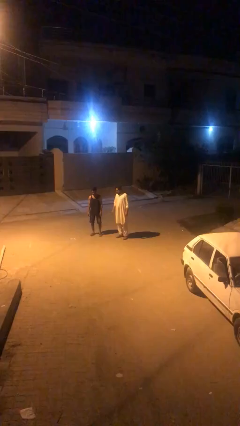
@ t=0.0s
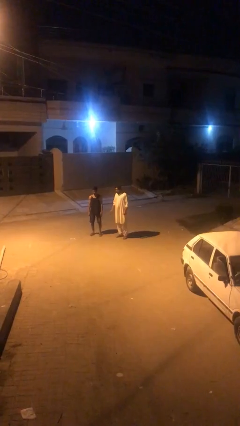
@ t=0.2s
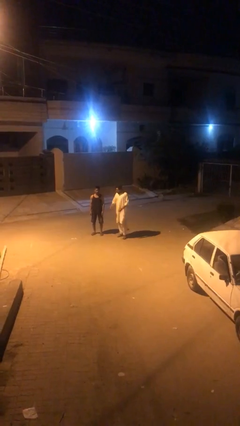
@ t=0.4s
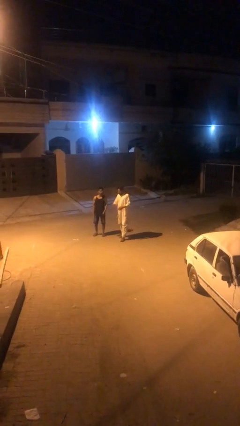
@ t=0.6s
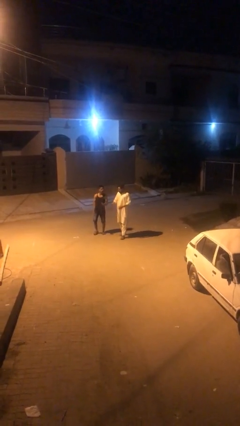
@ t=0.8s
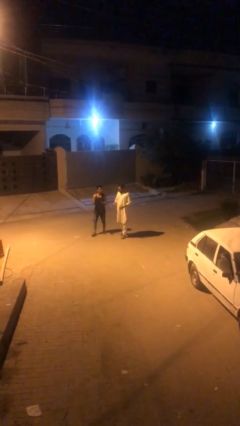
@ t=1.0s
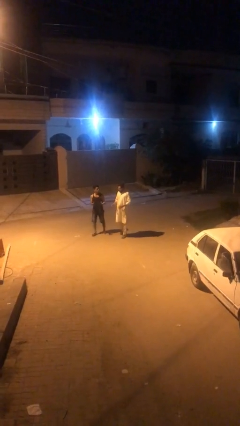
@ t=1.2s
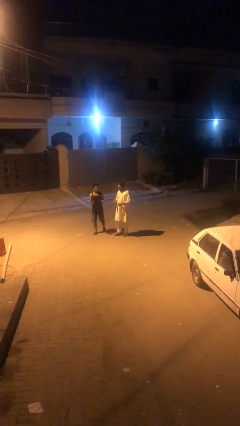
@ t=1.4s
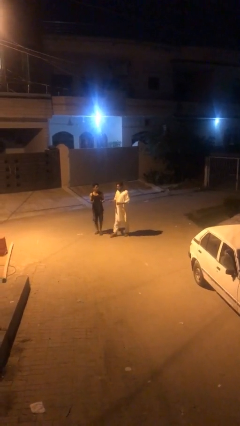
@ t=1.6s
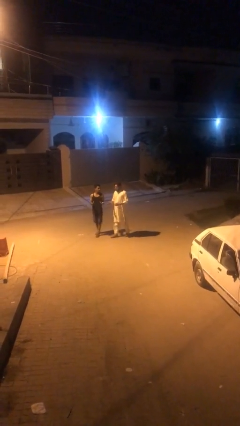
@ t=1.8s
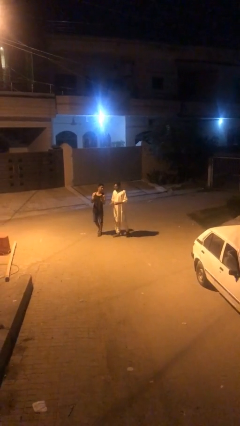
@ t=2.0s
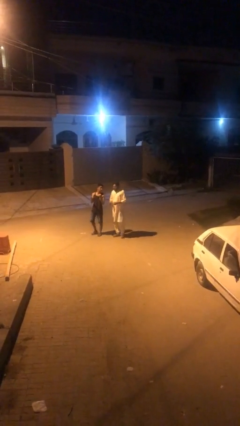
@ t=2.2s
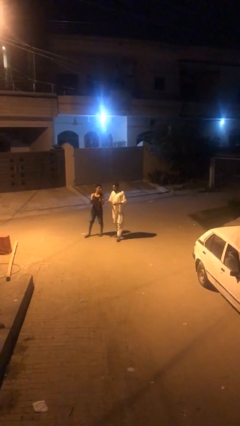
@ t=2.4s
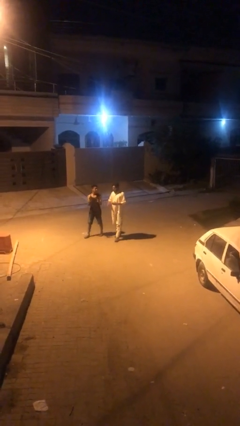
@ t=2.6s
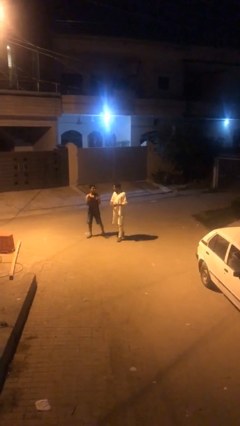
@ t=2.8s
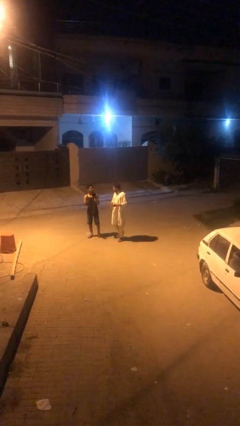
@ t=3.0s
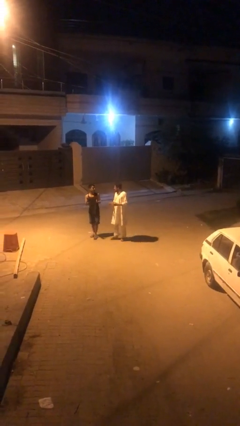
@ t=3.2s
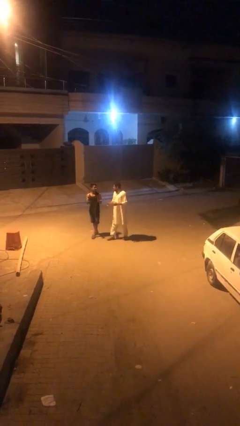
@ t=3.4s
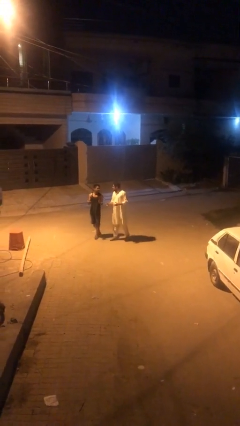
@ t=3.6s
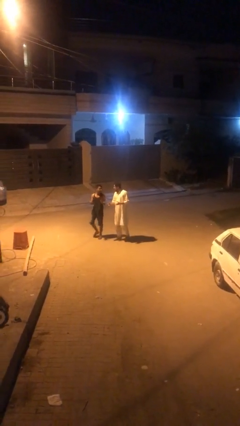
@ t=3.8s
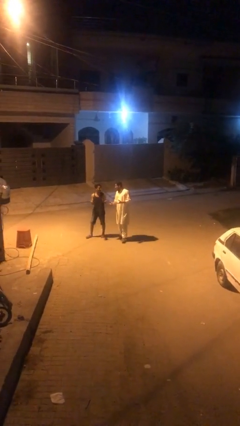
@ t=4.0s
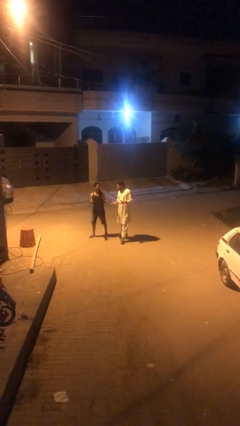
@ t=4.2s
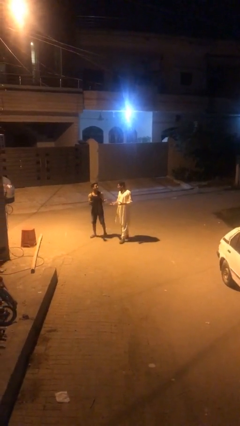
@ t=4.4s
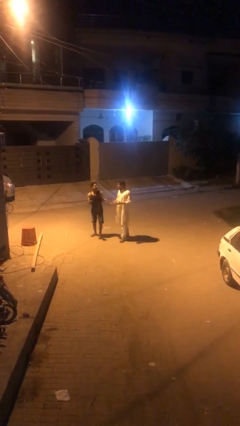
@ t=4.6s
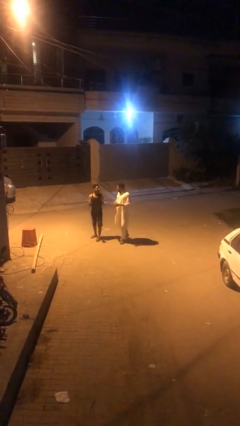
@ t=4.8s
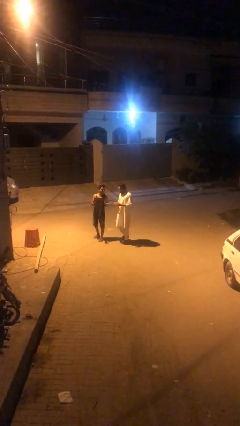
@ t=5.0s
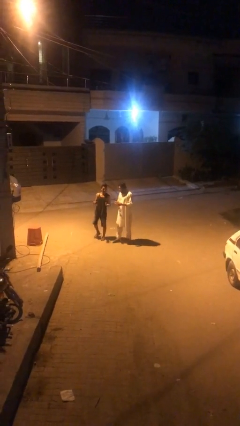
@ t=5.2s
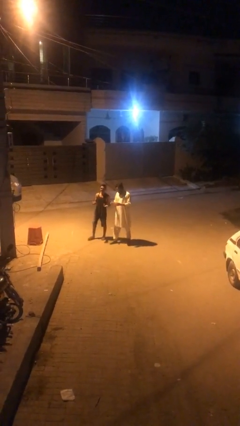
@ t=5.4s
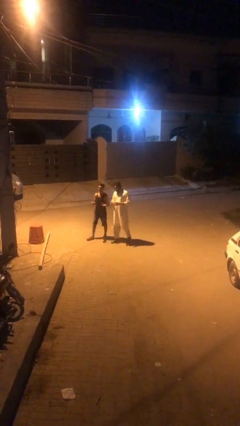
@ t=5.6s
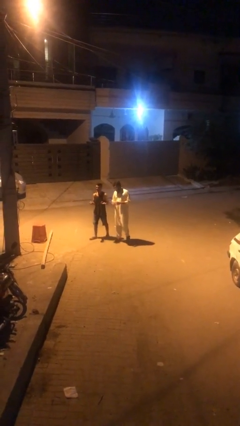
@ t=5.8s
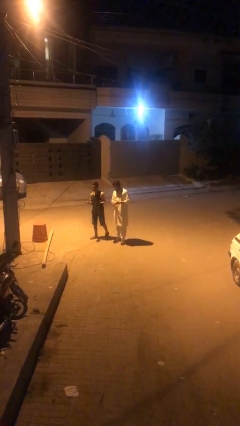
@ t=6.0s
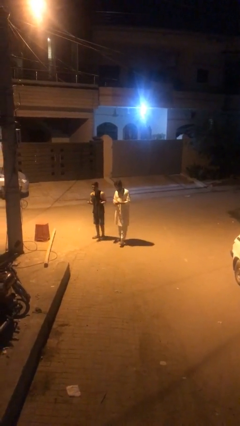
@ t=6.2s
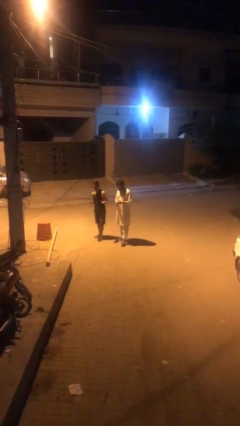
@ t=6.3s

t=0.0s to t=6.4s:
person talks to person

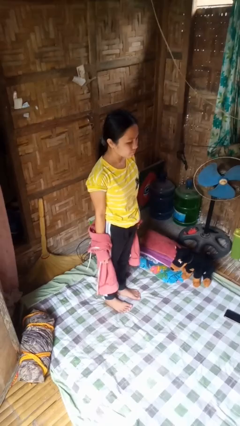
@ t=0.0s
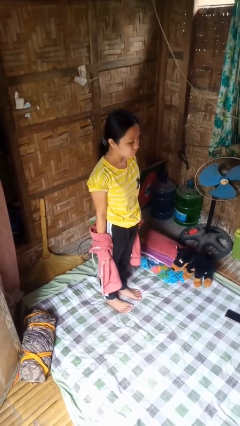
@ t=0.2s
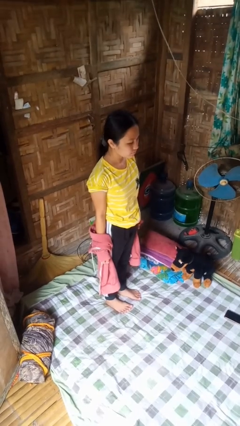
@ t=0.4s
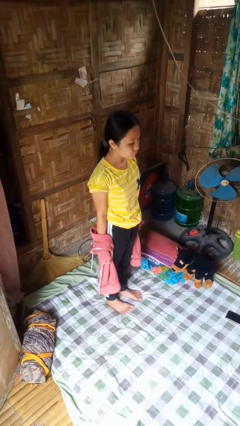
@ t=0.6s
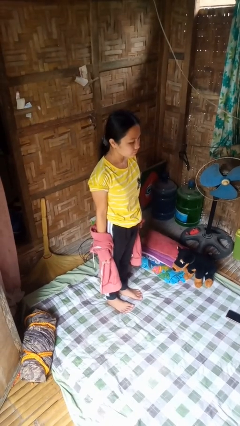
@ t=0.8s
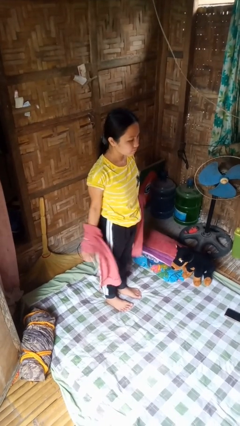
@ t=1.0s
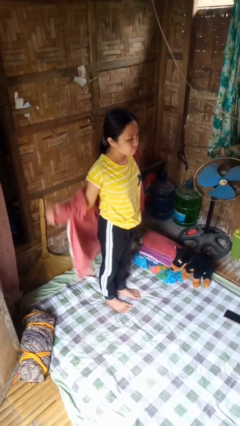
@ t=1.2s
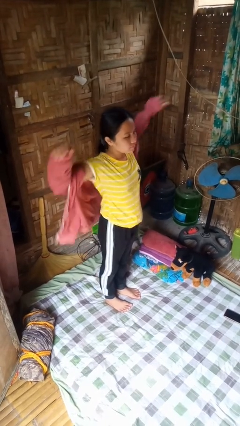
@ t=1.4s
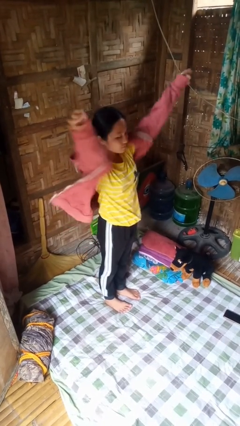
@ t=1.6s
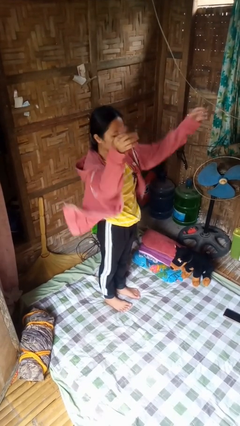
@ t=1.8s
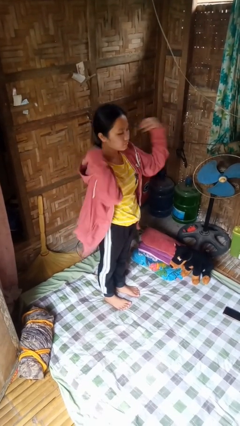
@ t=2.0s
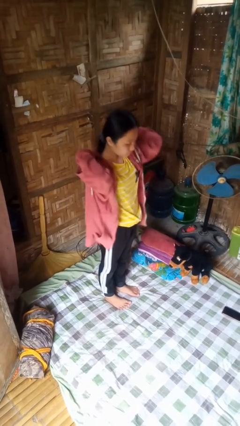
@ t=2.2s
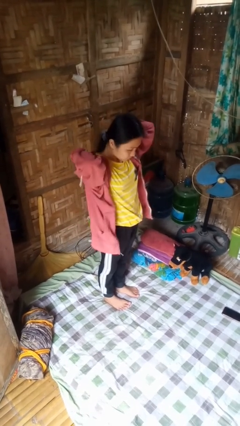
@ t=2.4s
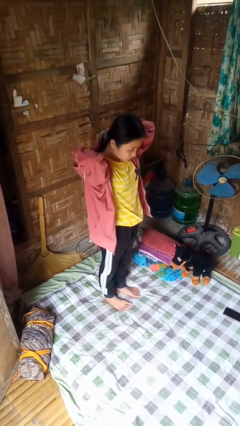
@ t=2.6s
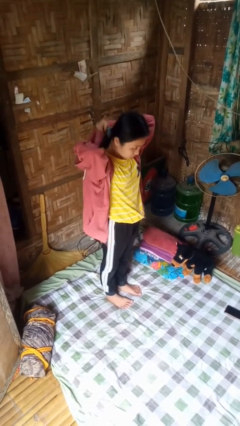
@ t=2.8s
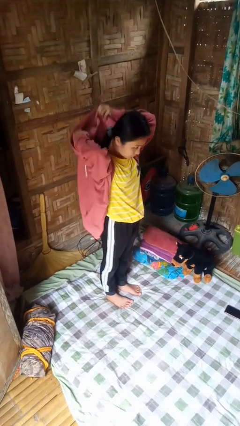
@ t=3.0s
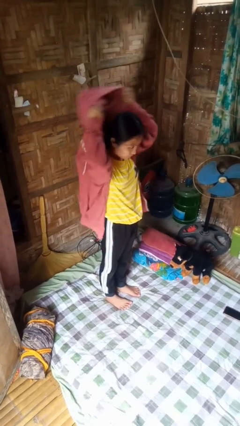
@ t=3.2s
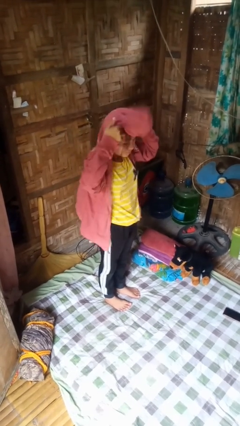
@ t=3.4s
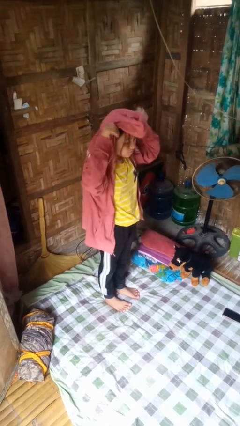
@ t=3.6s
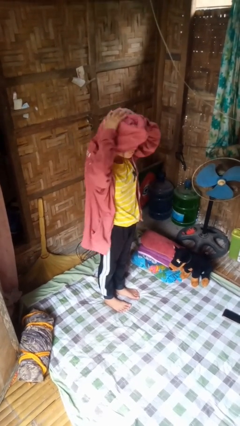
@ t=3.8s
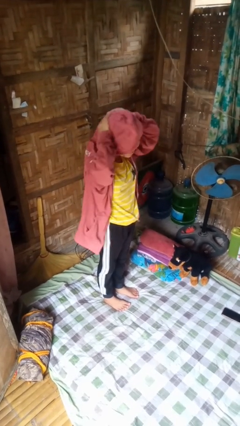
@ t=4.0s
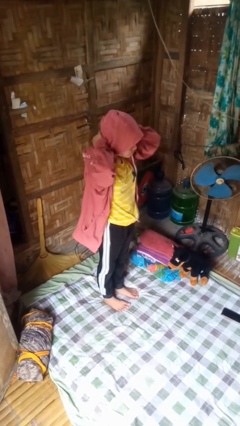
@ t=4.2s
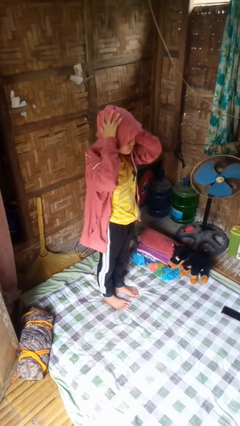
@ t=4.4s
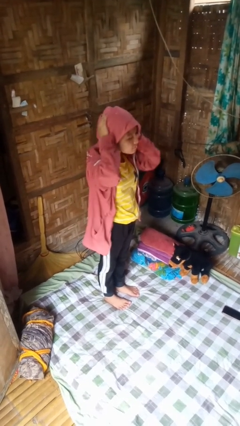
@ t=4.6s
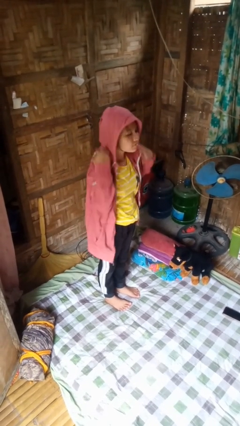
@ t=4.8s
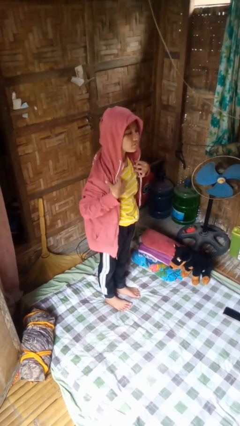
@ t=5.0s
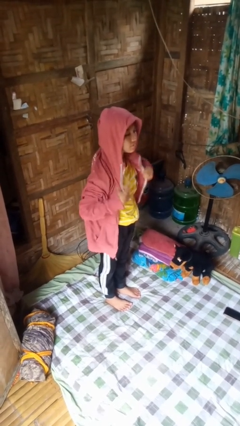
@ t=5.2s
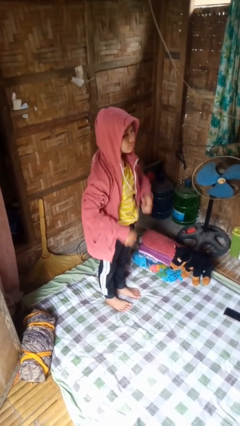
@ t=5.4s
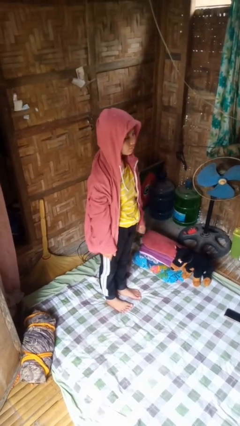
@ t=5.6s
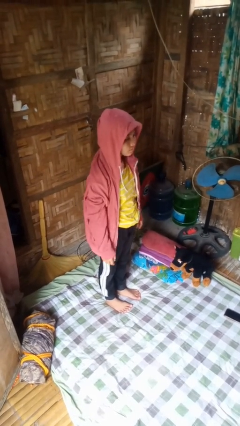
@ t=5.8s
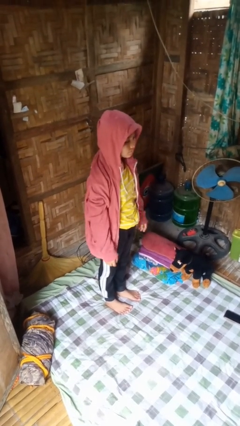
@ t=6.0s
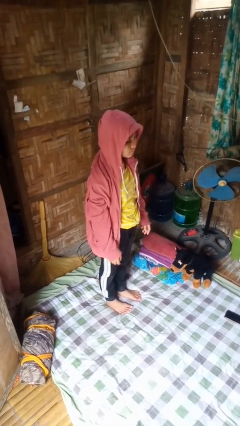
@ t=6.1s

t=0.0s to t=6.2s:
person puts on hoodie

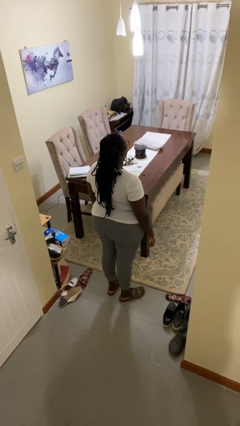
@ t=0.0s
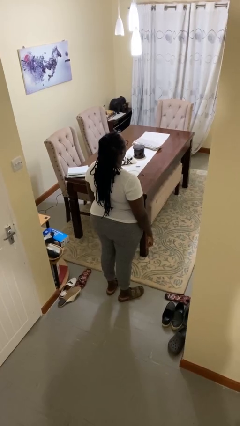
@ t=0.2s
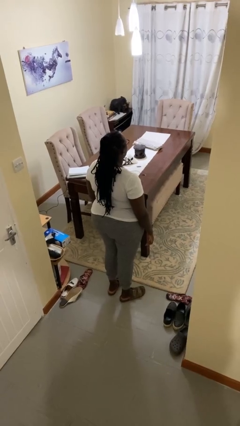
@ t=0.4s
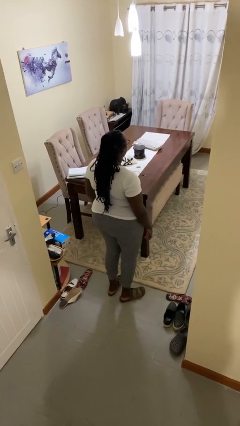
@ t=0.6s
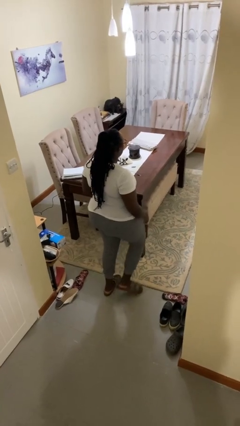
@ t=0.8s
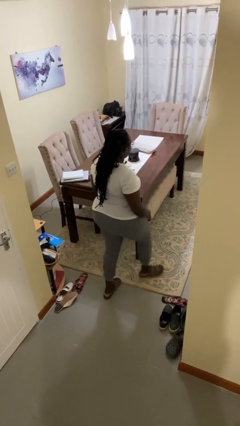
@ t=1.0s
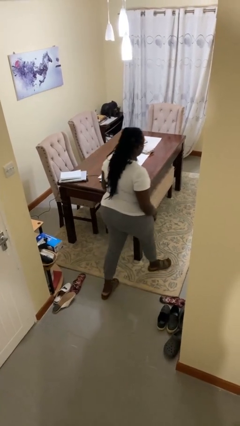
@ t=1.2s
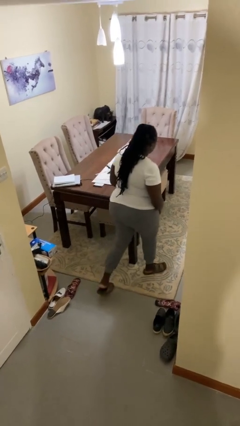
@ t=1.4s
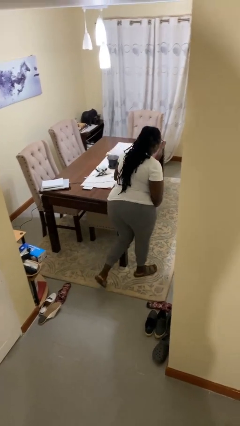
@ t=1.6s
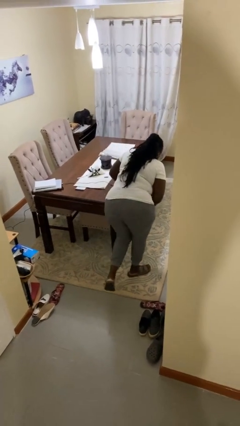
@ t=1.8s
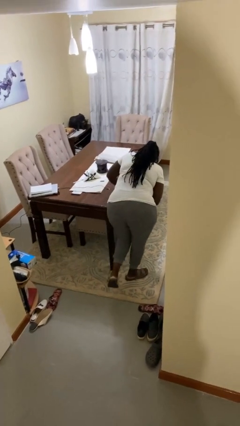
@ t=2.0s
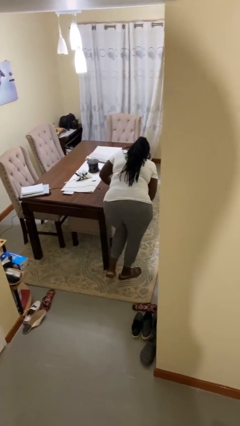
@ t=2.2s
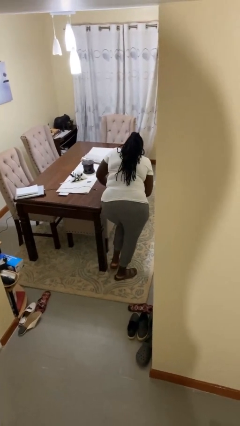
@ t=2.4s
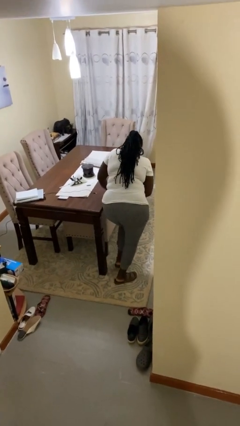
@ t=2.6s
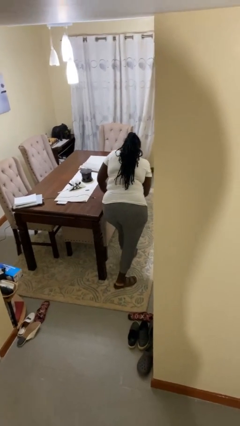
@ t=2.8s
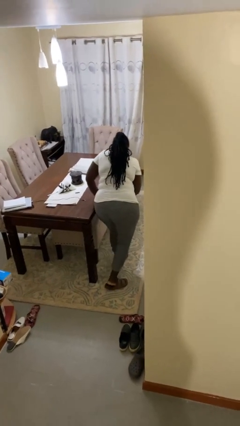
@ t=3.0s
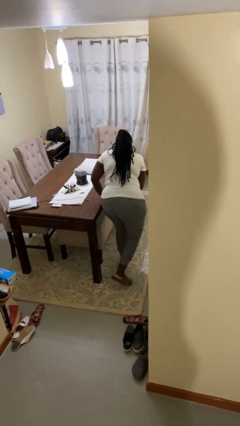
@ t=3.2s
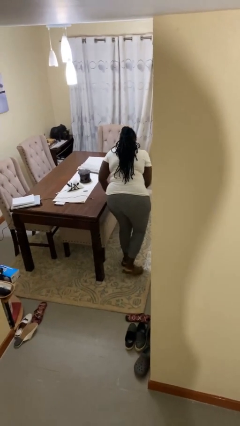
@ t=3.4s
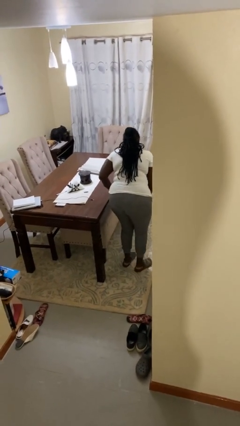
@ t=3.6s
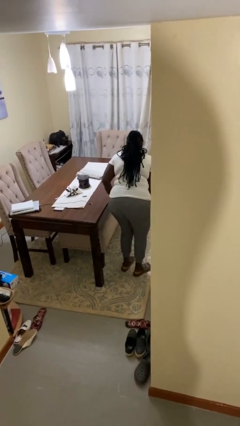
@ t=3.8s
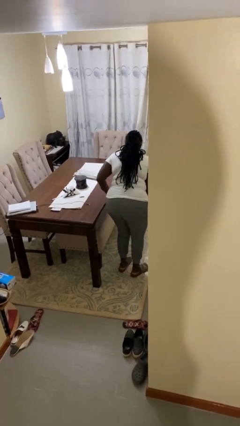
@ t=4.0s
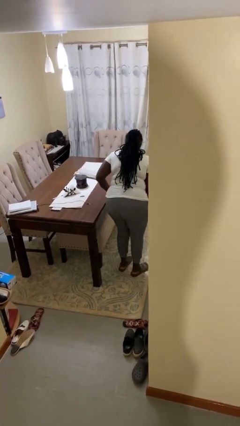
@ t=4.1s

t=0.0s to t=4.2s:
person bumps into table

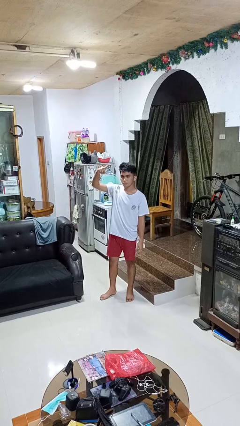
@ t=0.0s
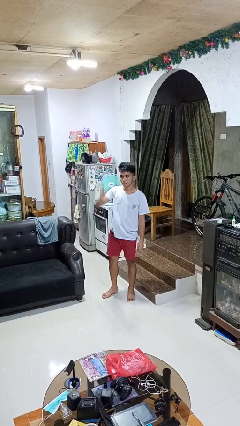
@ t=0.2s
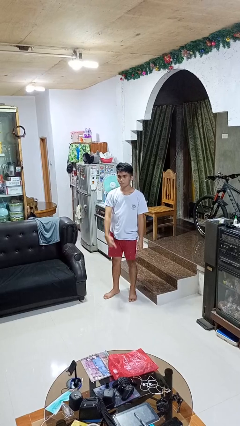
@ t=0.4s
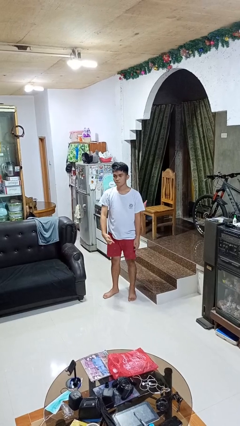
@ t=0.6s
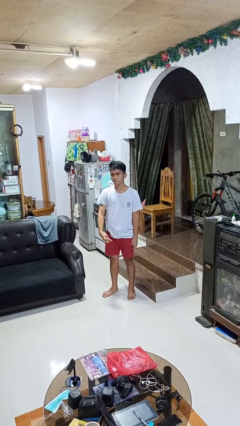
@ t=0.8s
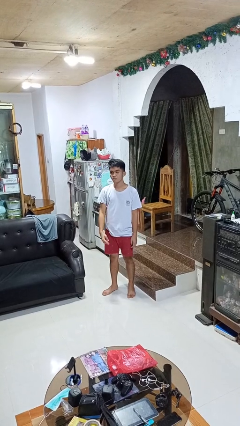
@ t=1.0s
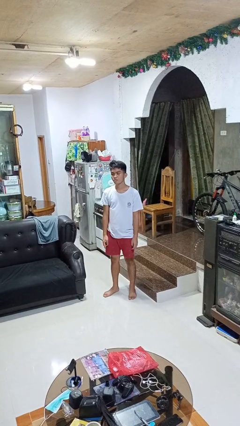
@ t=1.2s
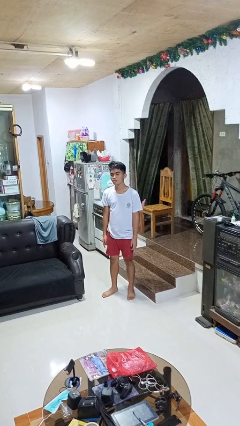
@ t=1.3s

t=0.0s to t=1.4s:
person gestures swipe down
